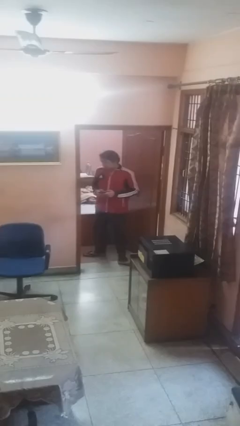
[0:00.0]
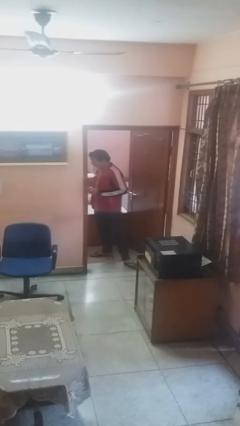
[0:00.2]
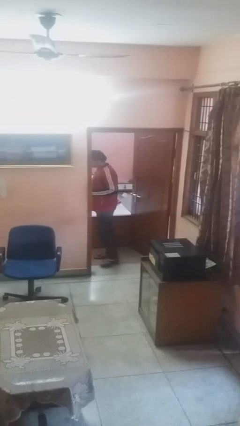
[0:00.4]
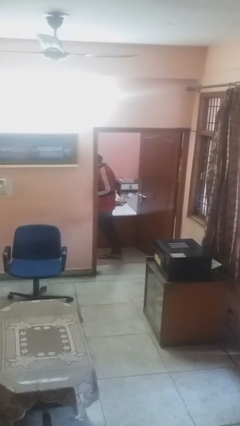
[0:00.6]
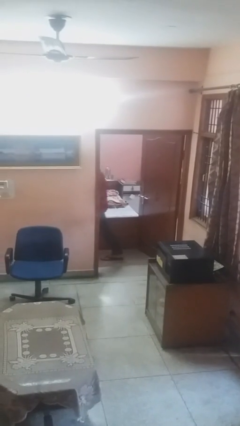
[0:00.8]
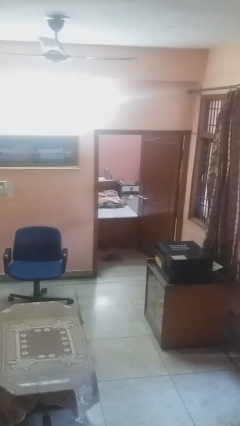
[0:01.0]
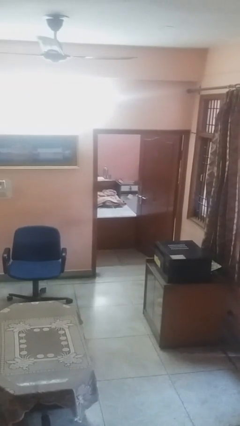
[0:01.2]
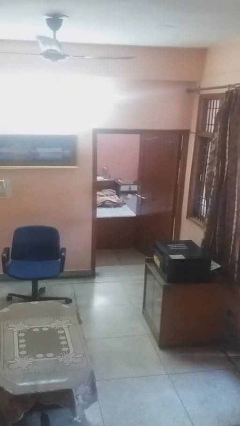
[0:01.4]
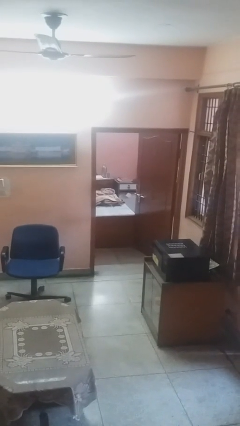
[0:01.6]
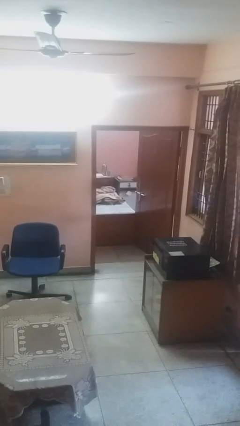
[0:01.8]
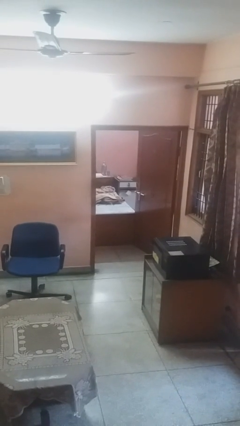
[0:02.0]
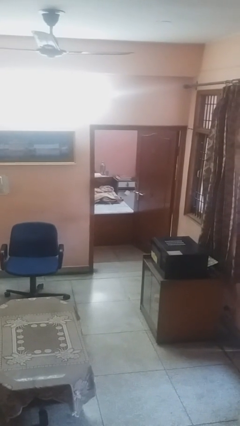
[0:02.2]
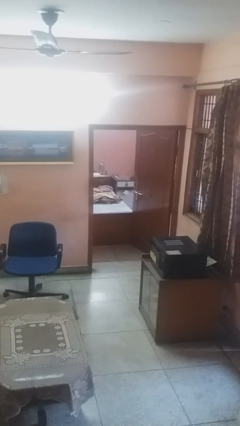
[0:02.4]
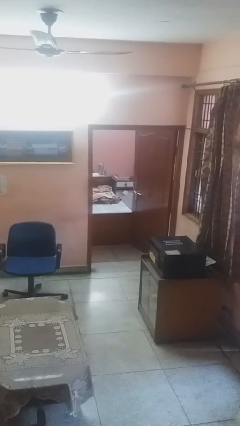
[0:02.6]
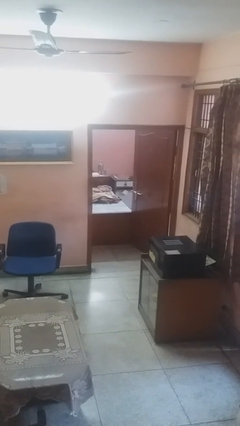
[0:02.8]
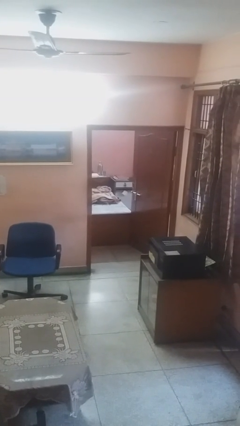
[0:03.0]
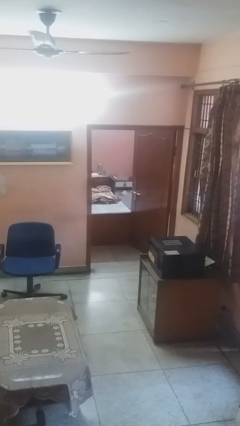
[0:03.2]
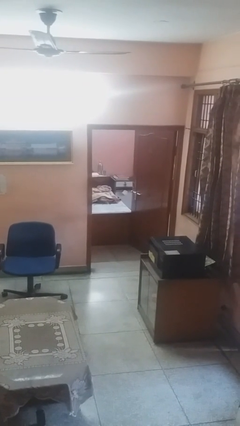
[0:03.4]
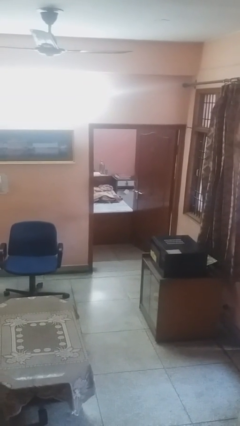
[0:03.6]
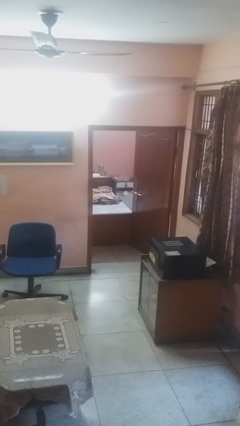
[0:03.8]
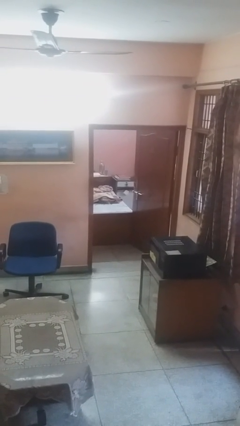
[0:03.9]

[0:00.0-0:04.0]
person exits scene through structure

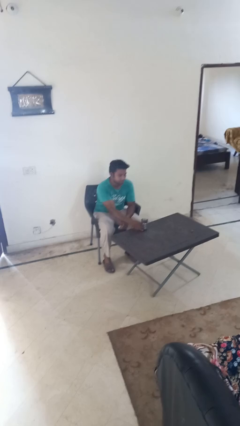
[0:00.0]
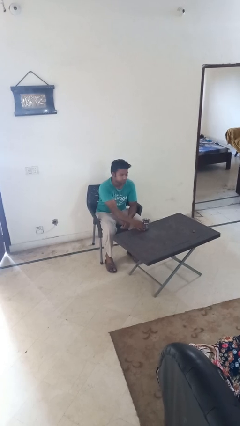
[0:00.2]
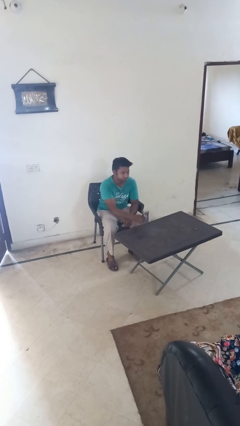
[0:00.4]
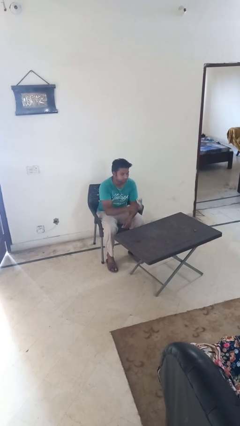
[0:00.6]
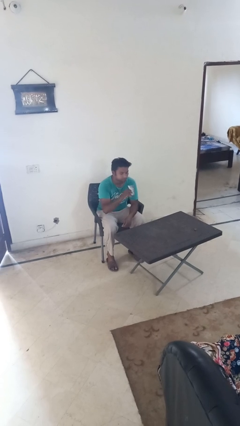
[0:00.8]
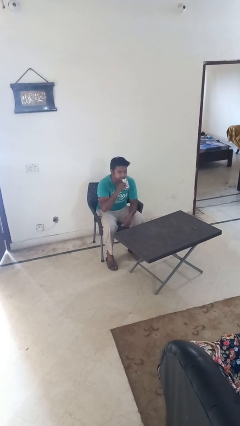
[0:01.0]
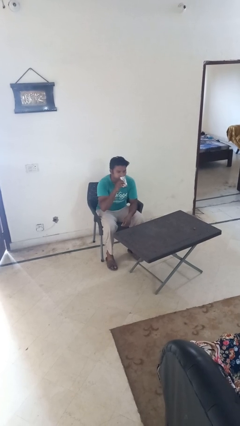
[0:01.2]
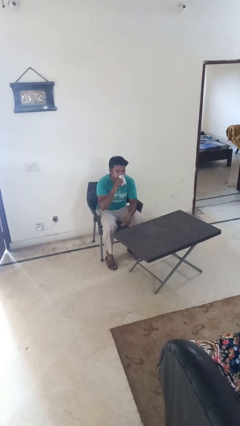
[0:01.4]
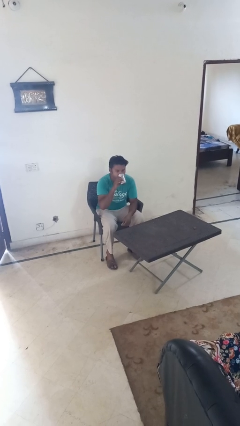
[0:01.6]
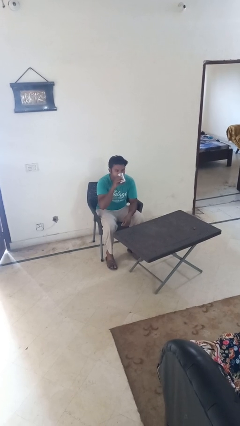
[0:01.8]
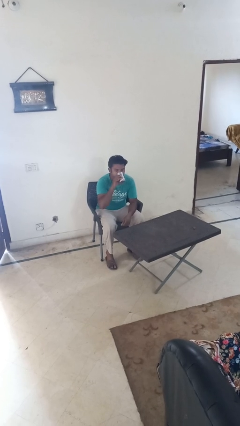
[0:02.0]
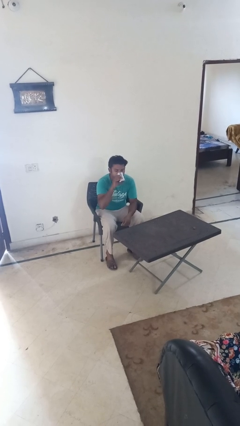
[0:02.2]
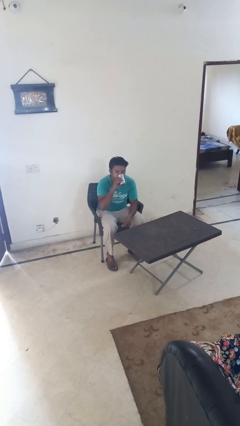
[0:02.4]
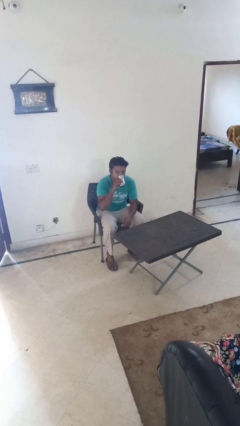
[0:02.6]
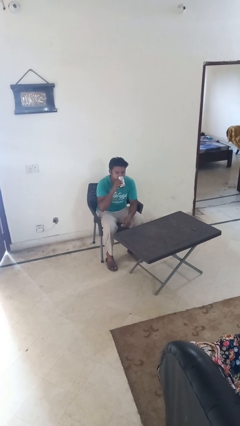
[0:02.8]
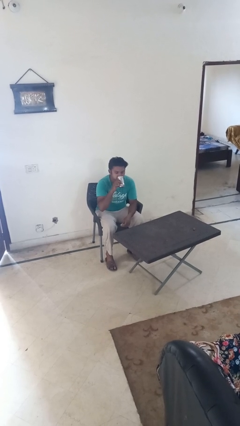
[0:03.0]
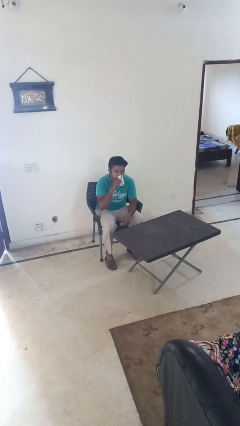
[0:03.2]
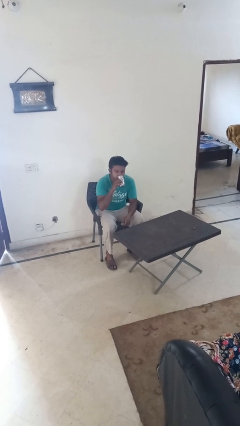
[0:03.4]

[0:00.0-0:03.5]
person drinks from cup

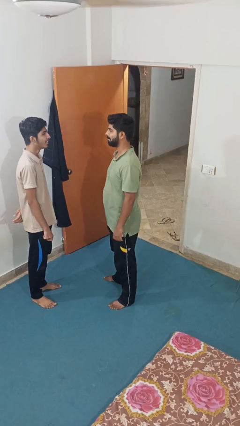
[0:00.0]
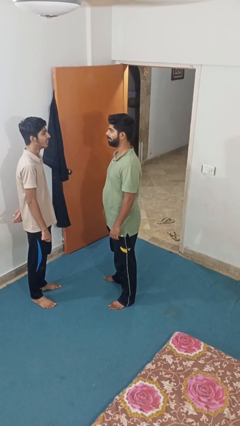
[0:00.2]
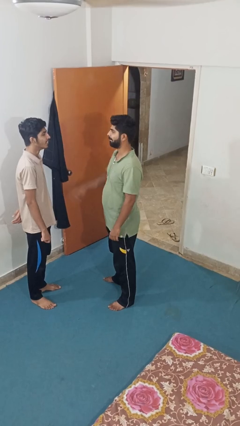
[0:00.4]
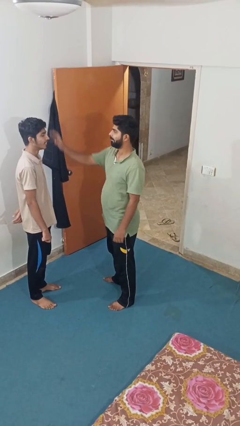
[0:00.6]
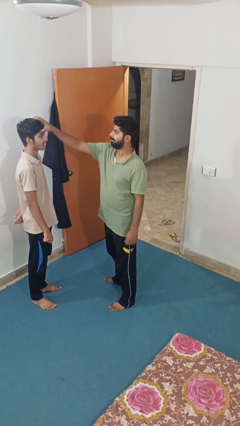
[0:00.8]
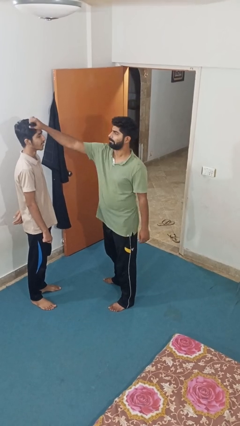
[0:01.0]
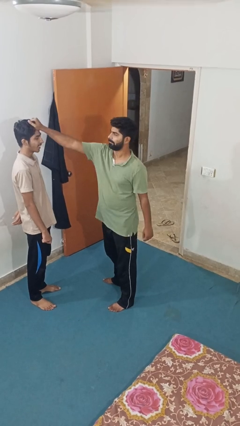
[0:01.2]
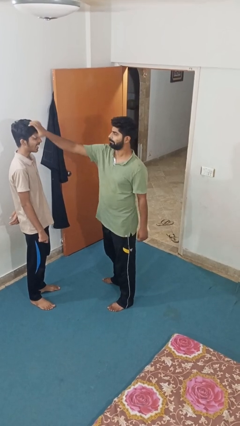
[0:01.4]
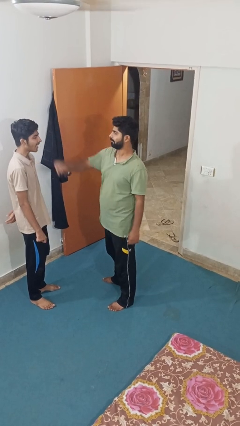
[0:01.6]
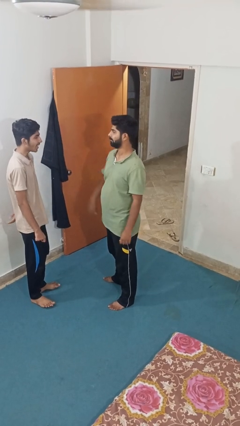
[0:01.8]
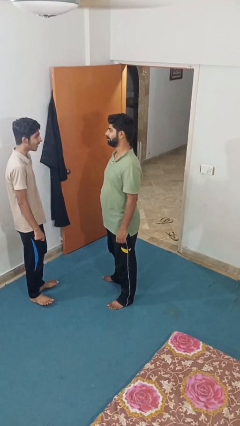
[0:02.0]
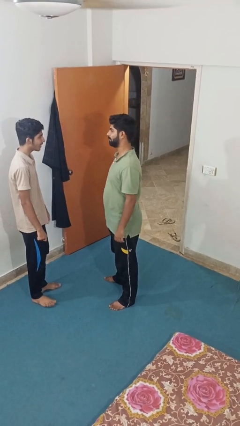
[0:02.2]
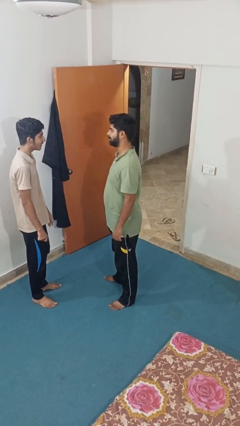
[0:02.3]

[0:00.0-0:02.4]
person grabs person by hair

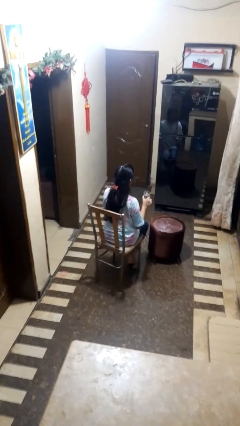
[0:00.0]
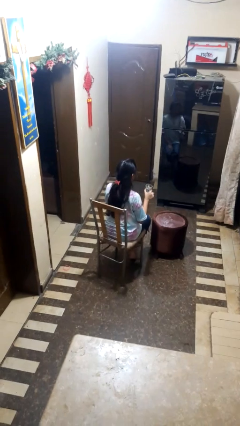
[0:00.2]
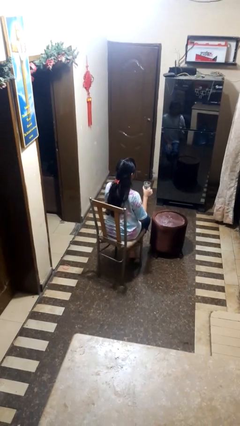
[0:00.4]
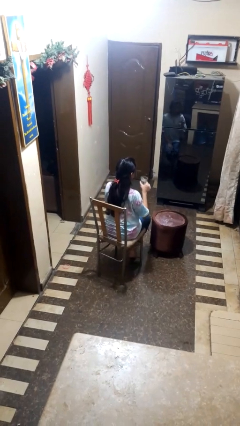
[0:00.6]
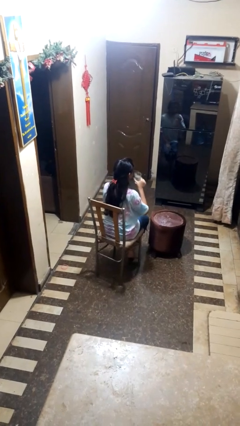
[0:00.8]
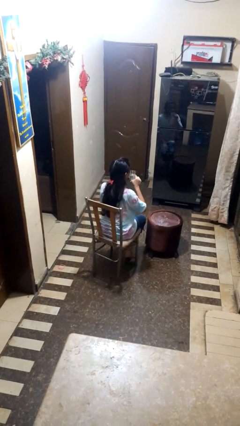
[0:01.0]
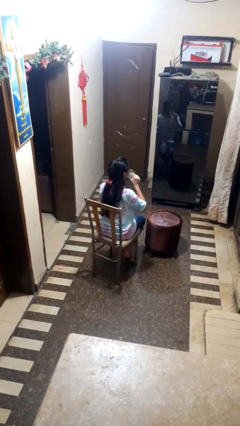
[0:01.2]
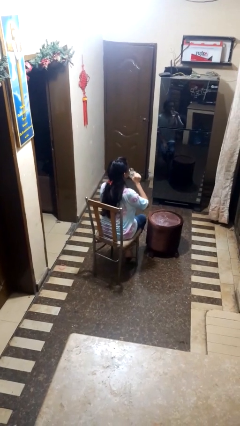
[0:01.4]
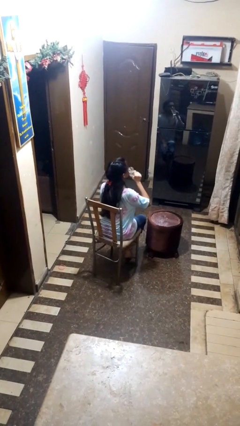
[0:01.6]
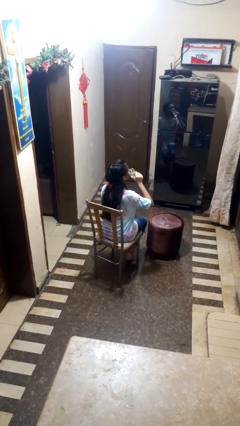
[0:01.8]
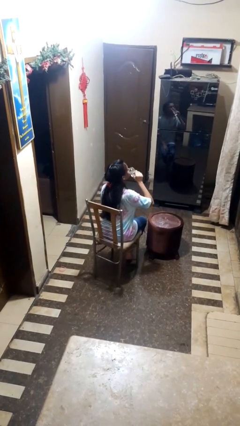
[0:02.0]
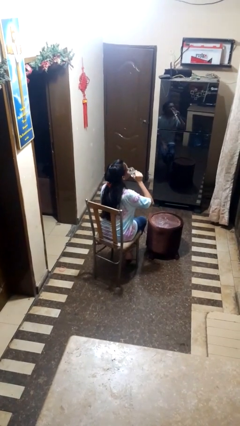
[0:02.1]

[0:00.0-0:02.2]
person drinks from shotglass

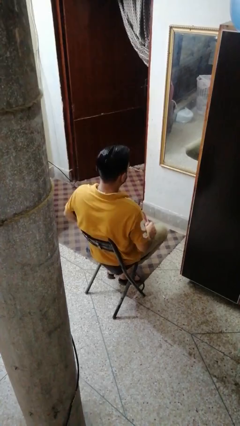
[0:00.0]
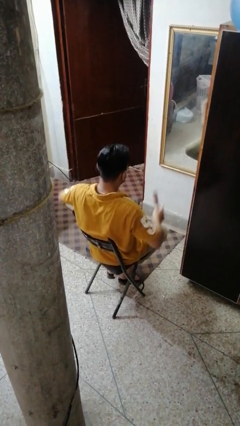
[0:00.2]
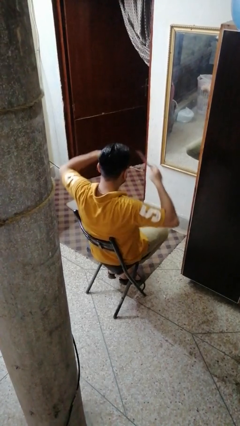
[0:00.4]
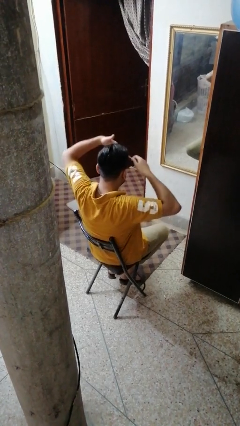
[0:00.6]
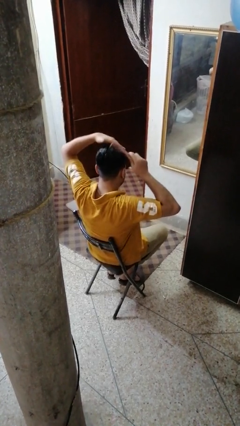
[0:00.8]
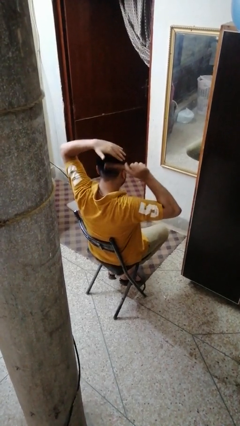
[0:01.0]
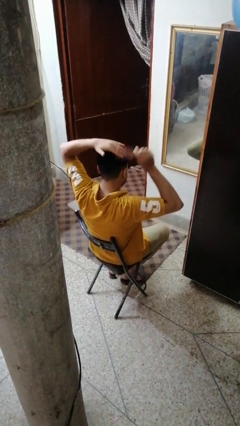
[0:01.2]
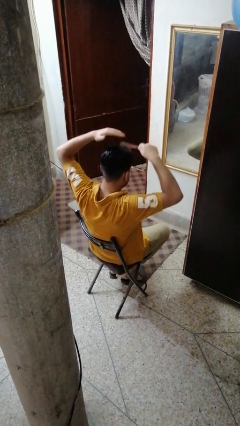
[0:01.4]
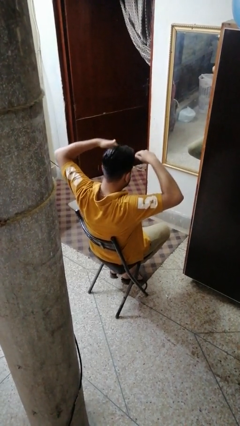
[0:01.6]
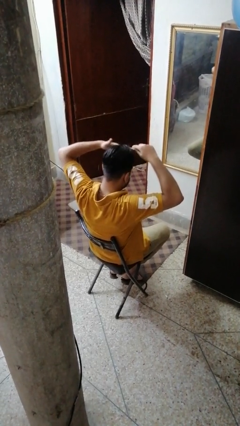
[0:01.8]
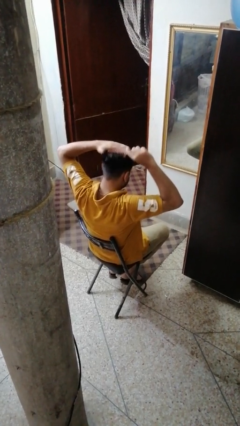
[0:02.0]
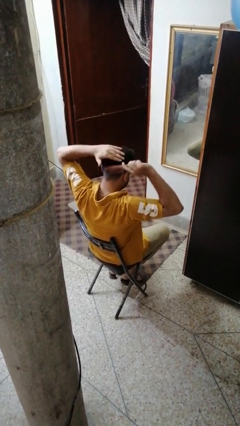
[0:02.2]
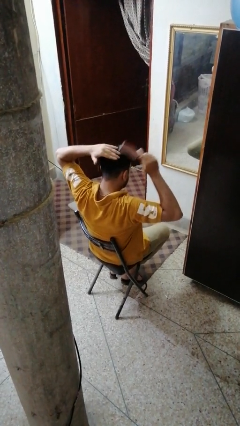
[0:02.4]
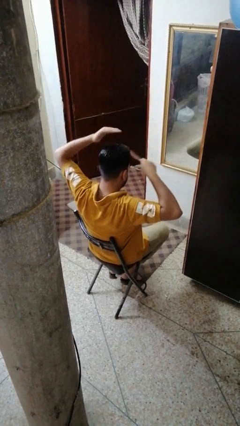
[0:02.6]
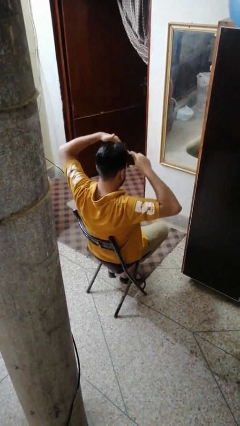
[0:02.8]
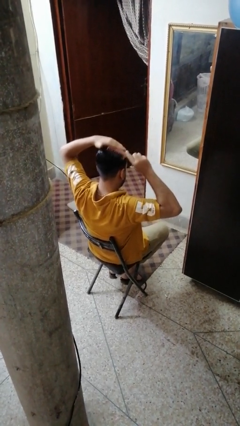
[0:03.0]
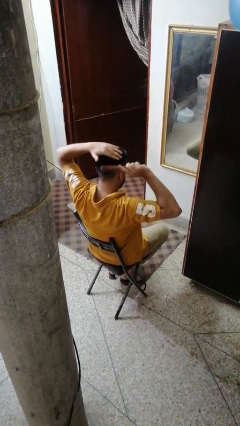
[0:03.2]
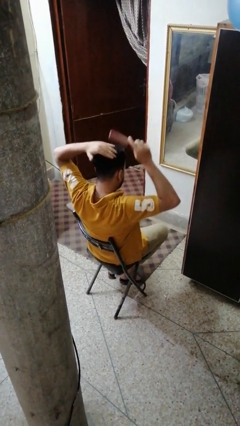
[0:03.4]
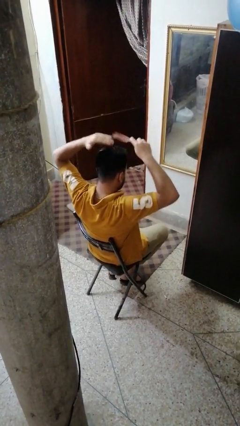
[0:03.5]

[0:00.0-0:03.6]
person brushes hair

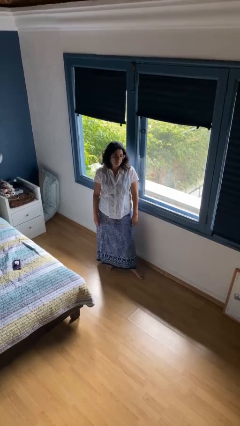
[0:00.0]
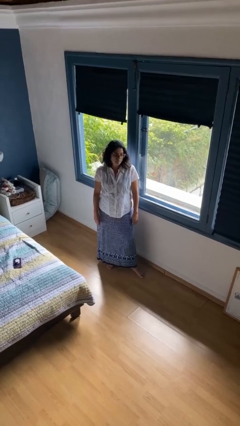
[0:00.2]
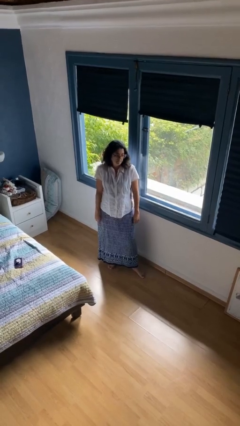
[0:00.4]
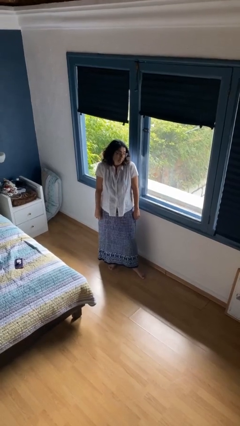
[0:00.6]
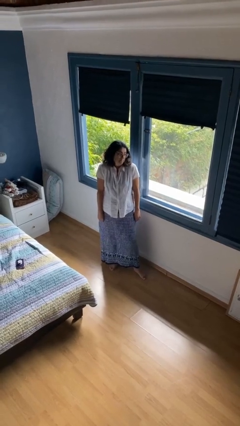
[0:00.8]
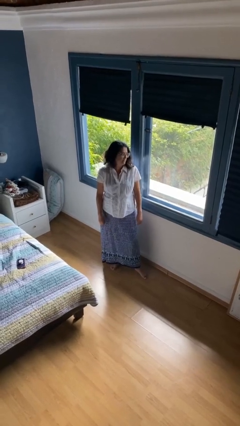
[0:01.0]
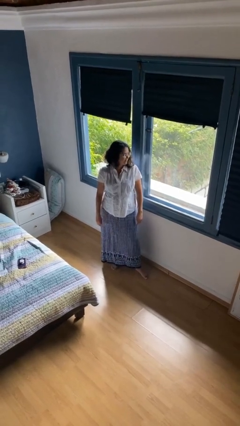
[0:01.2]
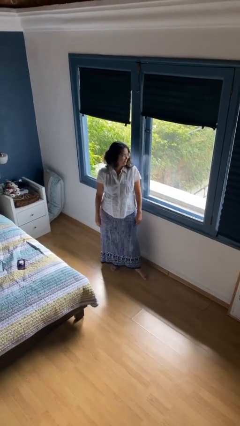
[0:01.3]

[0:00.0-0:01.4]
person shrugs

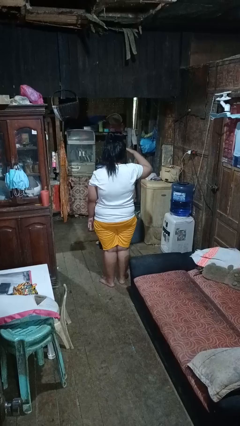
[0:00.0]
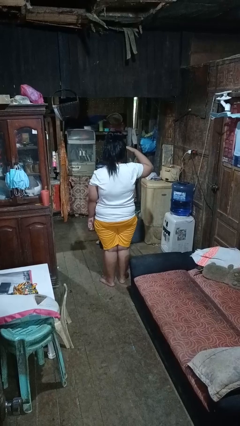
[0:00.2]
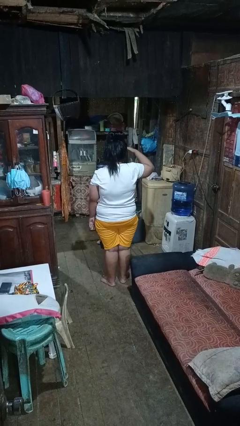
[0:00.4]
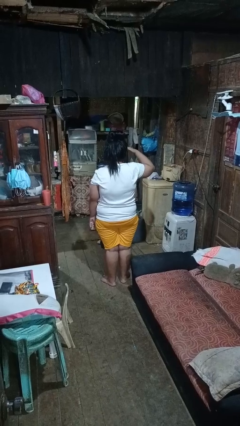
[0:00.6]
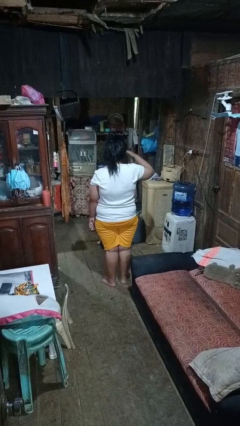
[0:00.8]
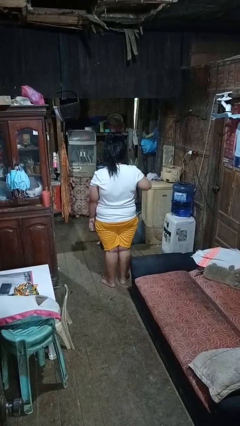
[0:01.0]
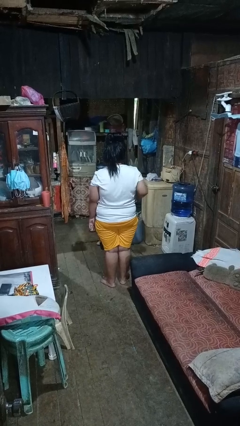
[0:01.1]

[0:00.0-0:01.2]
person salutes
